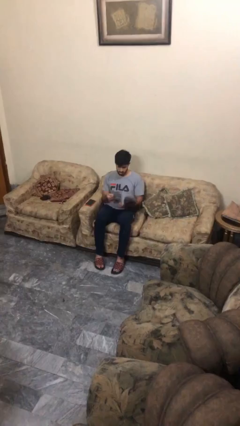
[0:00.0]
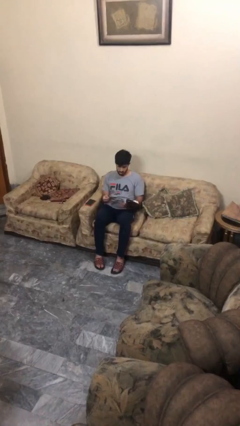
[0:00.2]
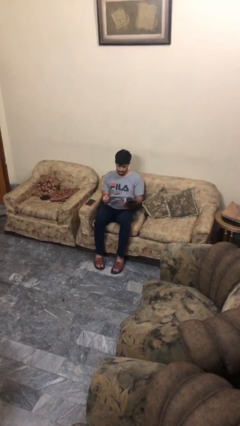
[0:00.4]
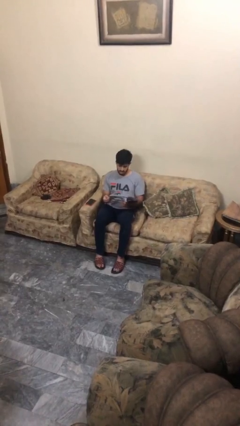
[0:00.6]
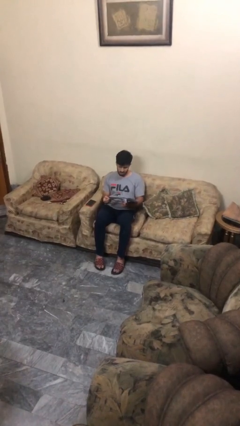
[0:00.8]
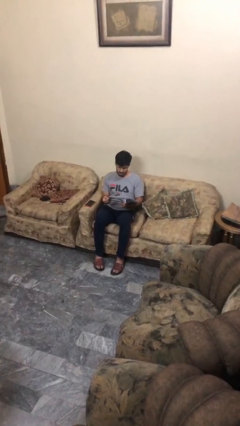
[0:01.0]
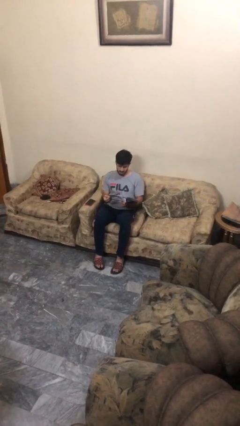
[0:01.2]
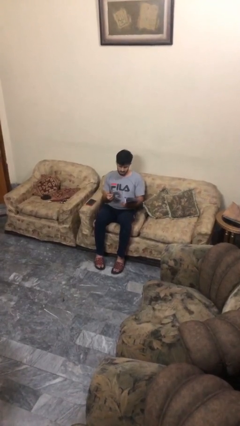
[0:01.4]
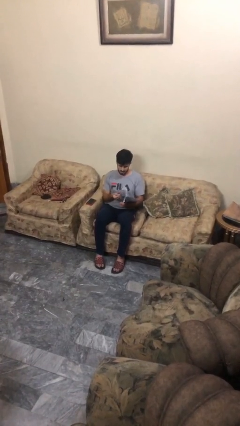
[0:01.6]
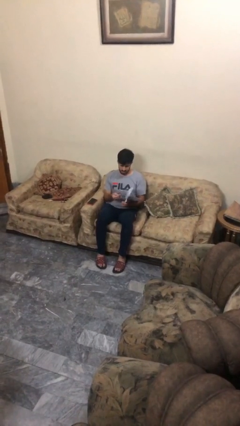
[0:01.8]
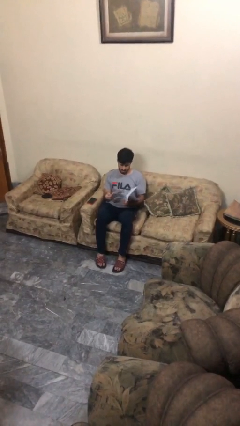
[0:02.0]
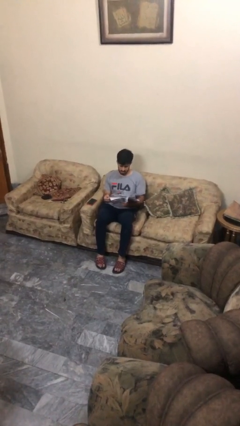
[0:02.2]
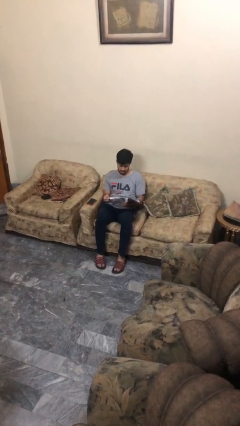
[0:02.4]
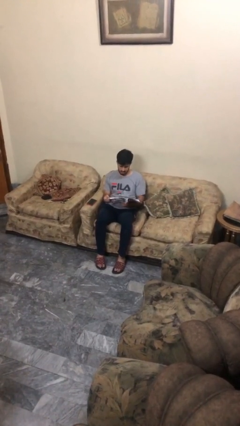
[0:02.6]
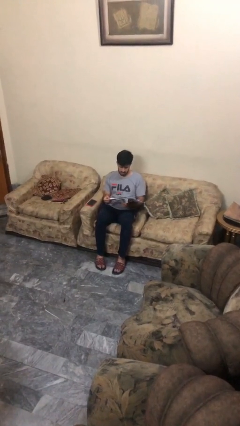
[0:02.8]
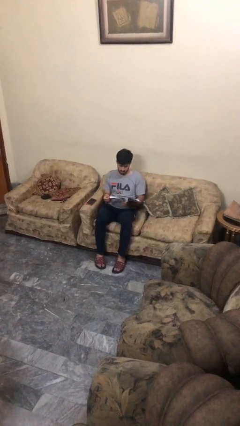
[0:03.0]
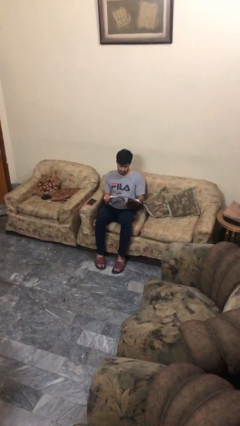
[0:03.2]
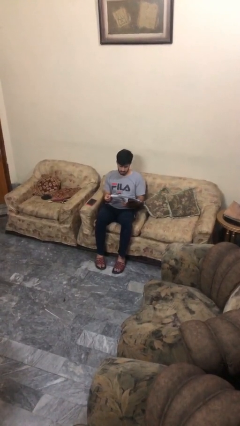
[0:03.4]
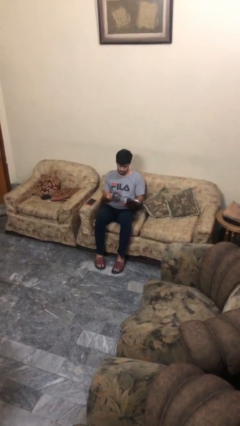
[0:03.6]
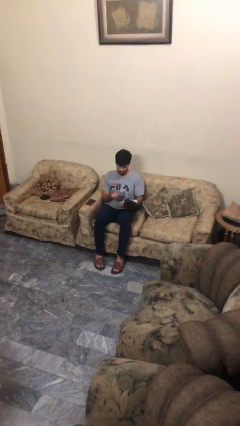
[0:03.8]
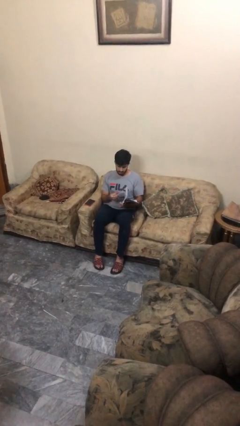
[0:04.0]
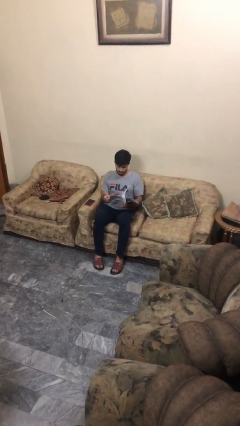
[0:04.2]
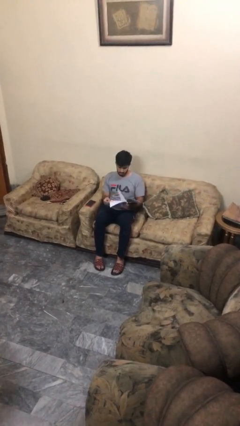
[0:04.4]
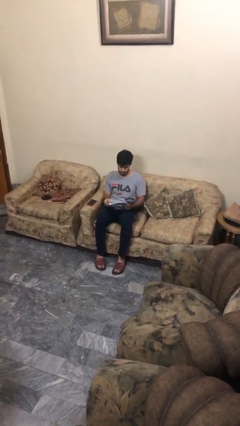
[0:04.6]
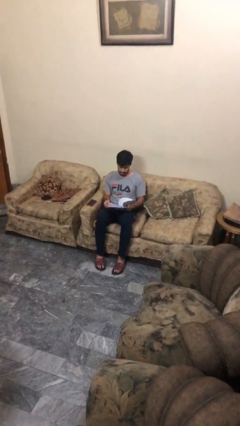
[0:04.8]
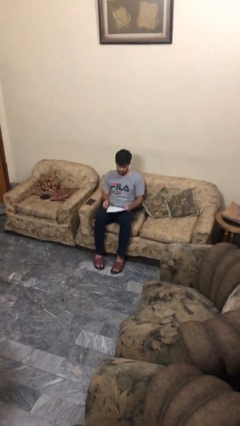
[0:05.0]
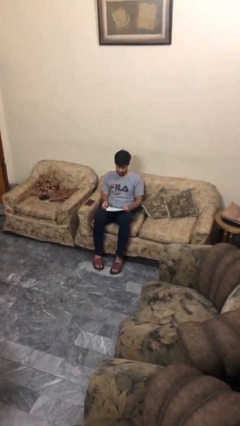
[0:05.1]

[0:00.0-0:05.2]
person reads magazine

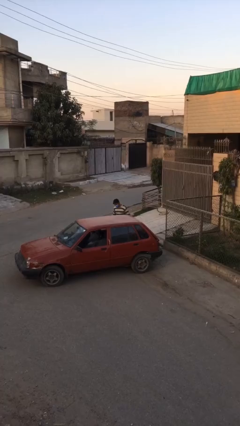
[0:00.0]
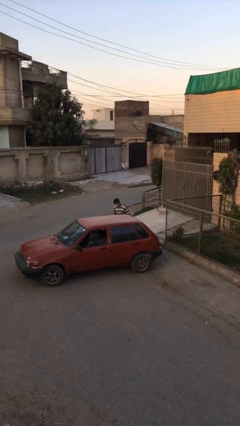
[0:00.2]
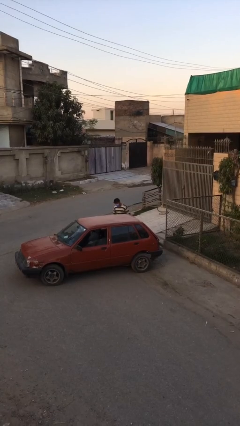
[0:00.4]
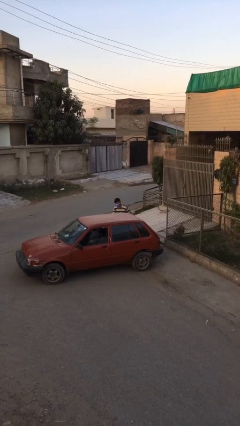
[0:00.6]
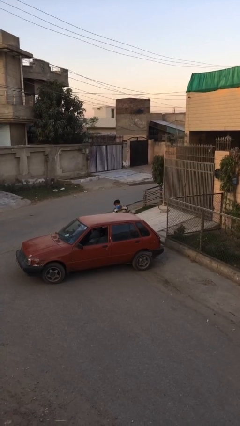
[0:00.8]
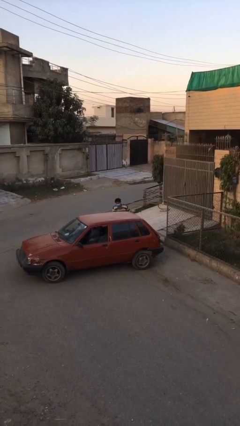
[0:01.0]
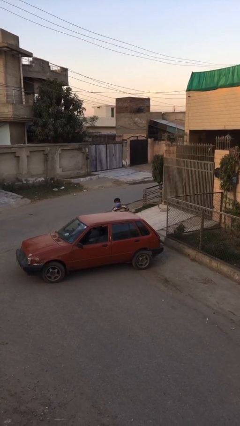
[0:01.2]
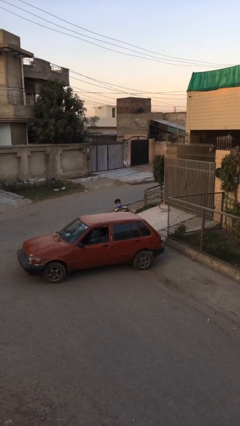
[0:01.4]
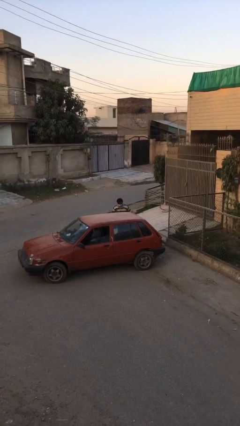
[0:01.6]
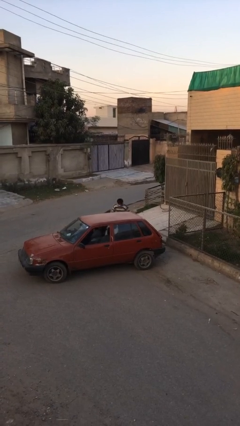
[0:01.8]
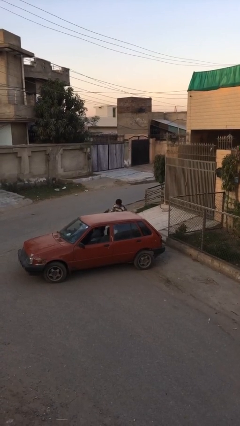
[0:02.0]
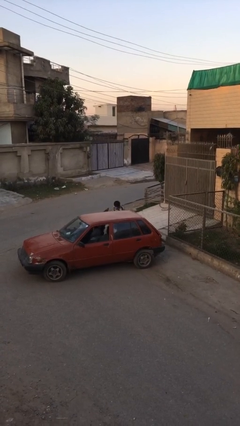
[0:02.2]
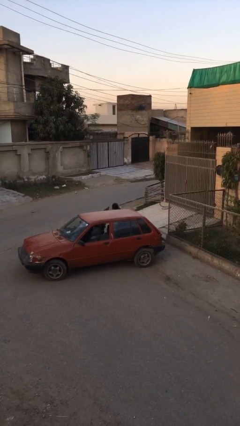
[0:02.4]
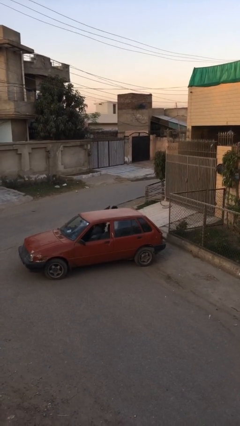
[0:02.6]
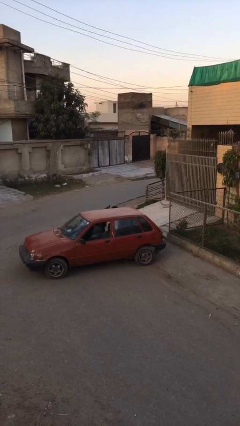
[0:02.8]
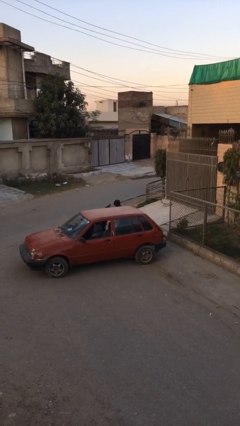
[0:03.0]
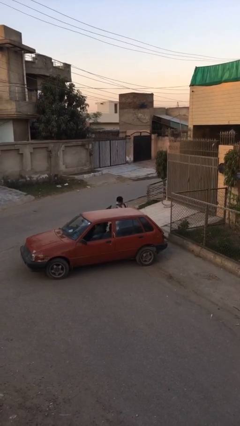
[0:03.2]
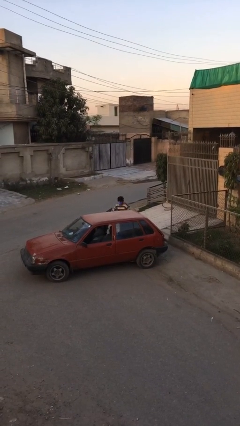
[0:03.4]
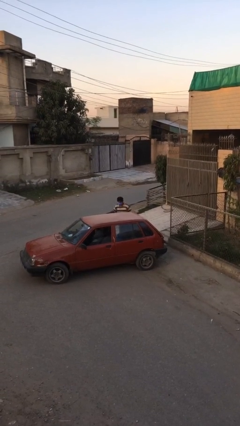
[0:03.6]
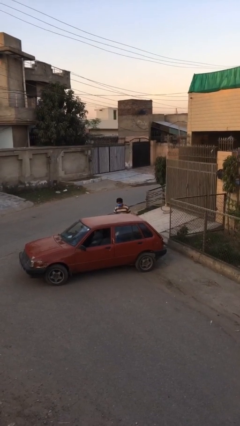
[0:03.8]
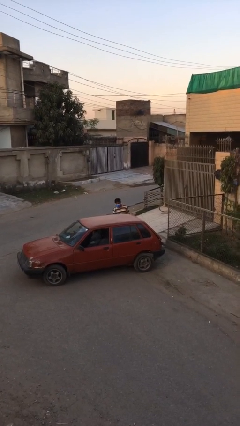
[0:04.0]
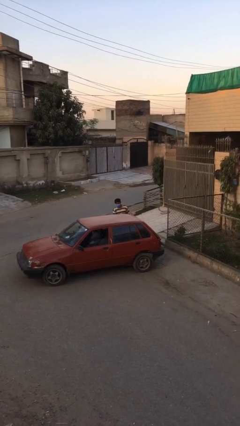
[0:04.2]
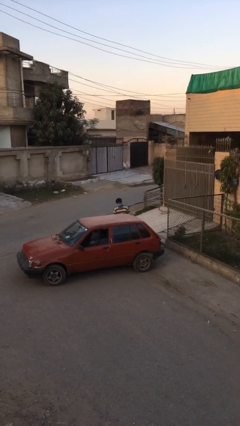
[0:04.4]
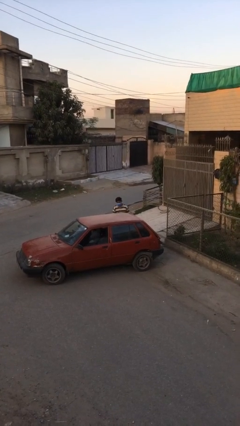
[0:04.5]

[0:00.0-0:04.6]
person loads car

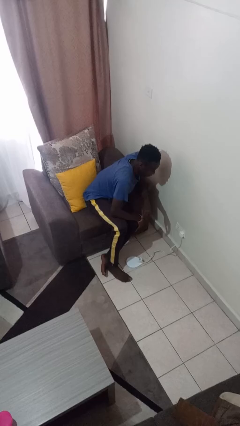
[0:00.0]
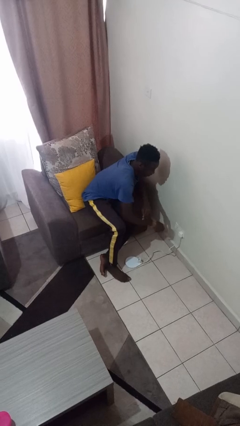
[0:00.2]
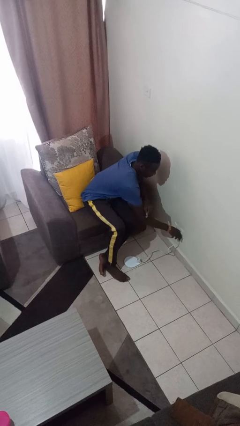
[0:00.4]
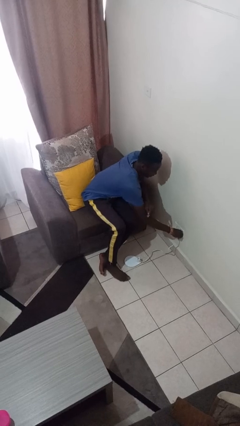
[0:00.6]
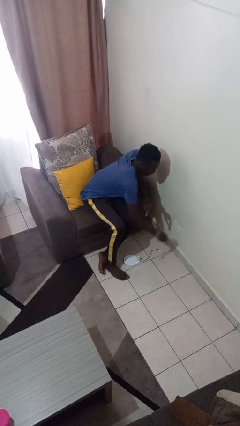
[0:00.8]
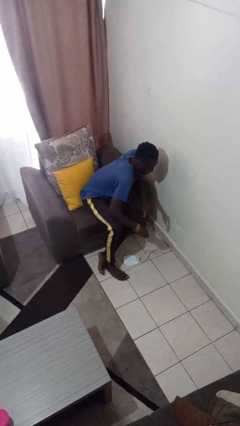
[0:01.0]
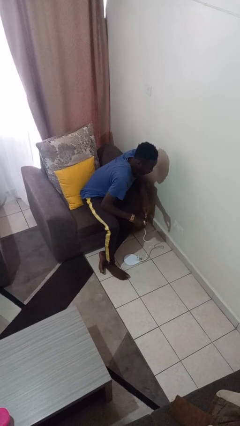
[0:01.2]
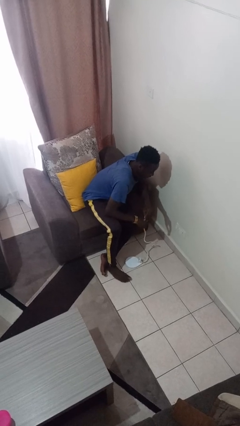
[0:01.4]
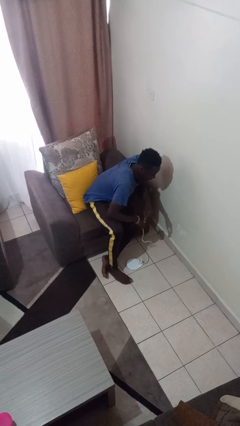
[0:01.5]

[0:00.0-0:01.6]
person unplugs from electrical socket

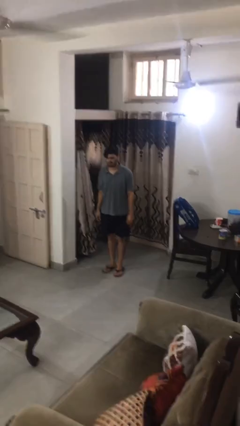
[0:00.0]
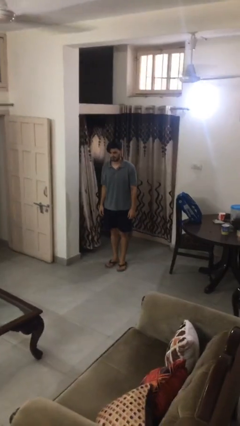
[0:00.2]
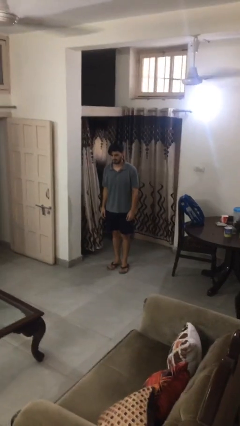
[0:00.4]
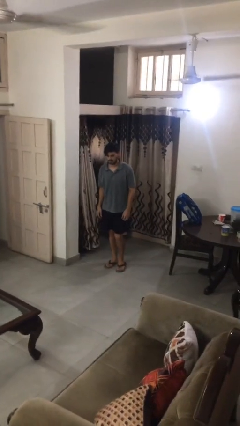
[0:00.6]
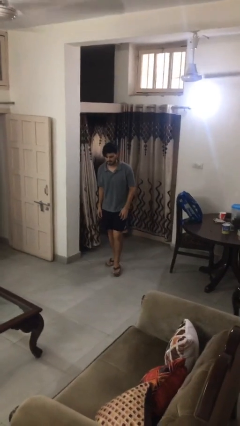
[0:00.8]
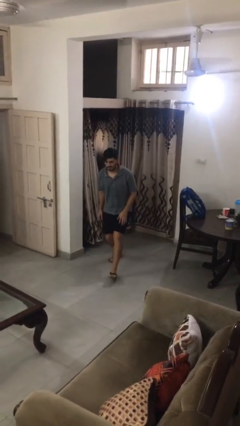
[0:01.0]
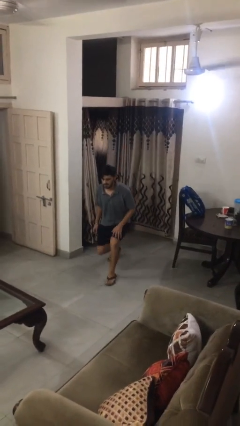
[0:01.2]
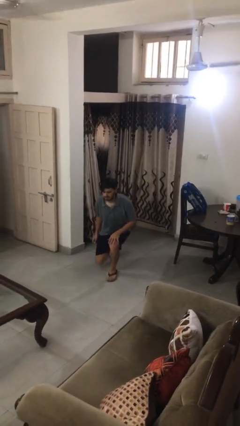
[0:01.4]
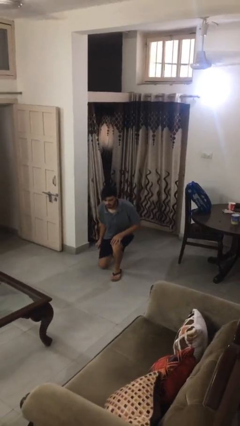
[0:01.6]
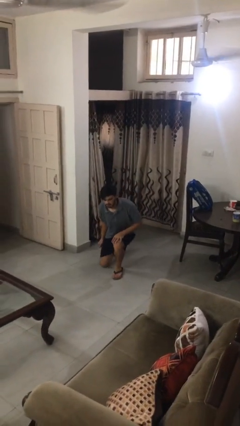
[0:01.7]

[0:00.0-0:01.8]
person kneels

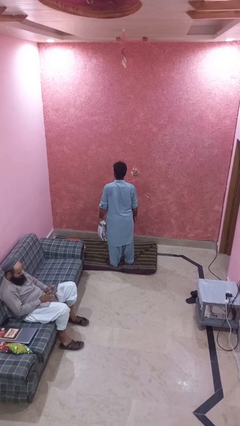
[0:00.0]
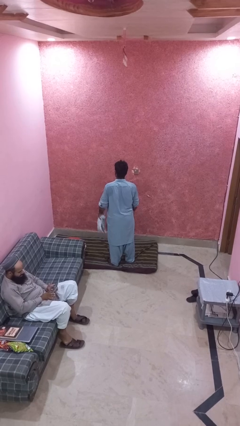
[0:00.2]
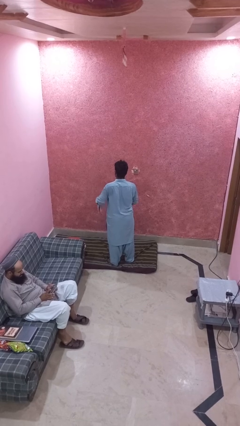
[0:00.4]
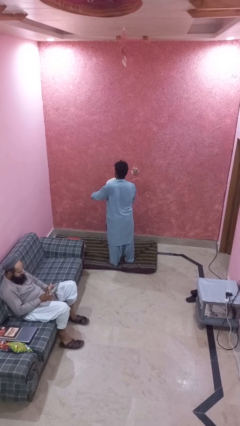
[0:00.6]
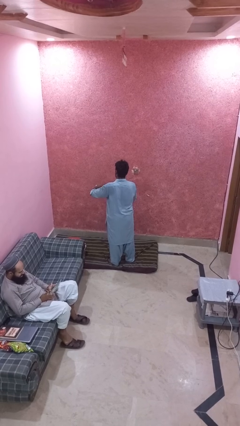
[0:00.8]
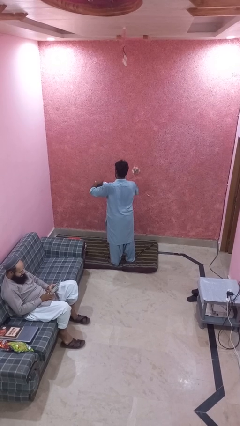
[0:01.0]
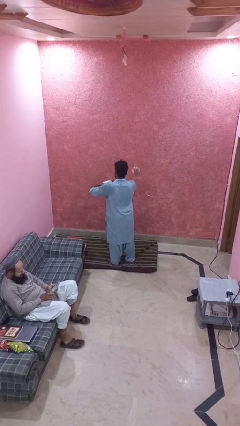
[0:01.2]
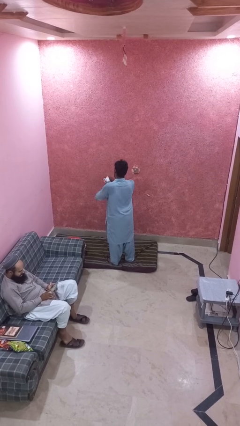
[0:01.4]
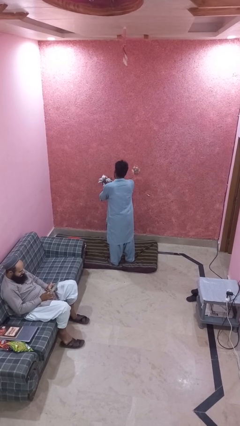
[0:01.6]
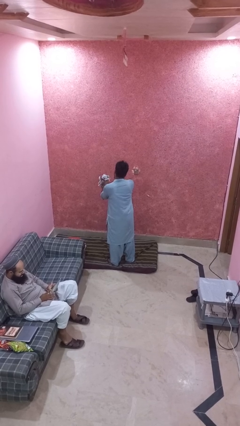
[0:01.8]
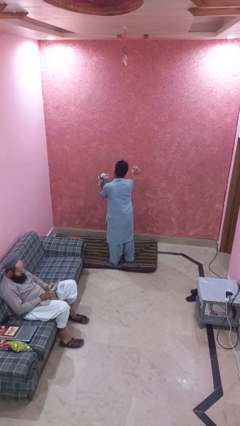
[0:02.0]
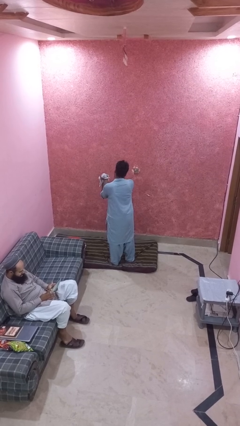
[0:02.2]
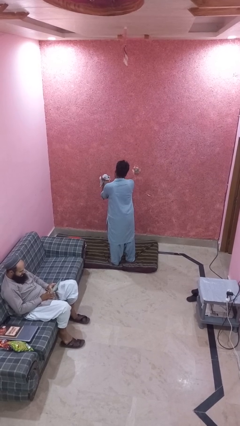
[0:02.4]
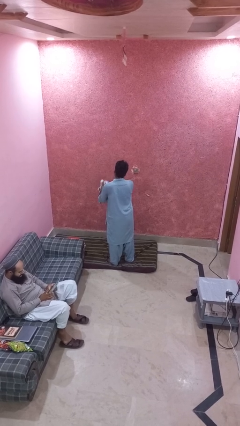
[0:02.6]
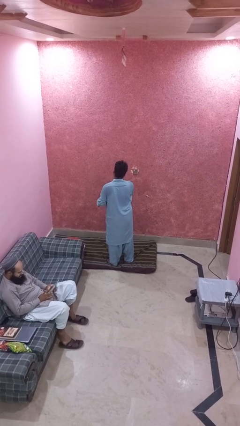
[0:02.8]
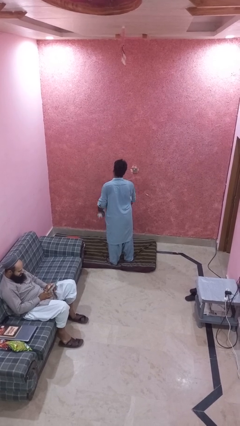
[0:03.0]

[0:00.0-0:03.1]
person squeezes object

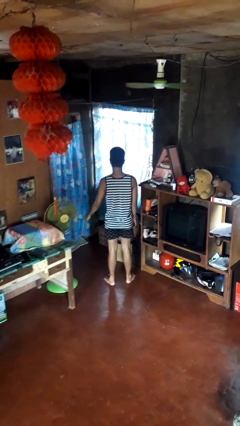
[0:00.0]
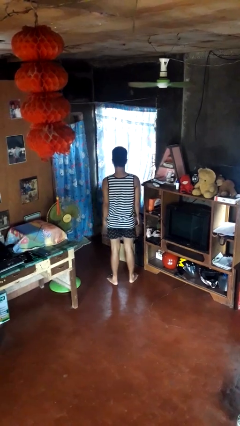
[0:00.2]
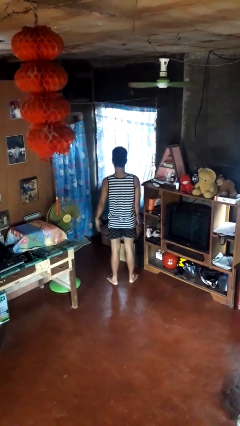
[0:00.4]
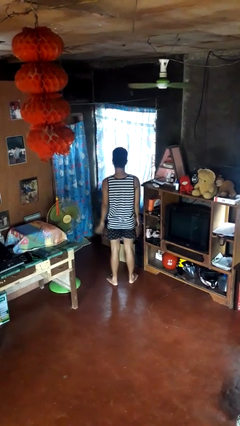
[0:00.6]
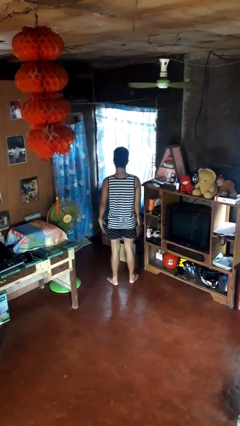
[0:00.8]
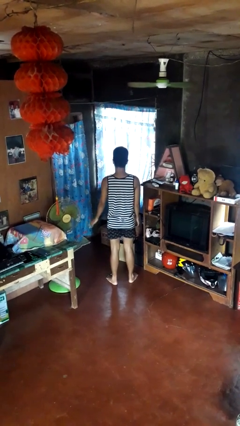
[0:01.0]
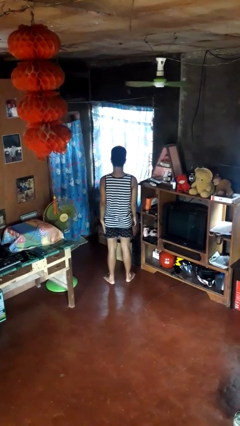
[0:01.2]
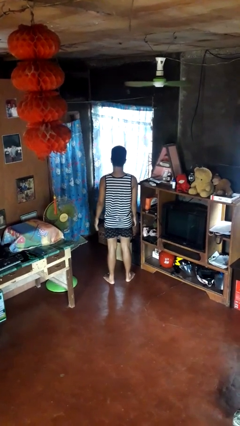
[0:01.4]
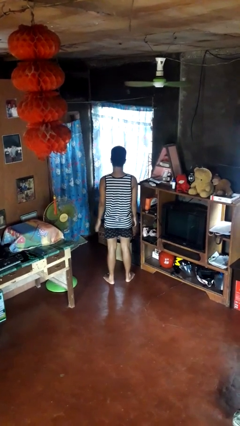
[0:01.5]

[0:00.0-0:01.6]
person slaps hands on thighs
